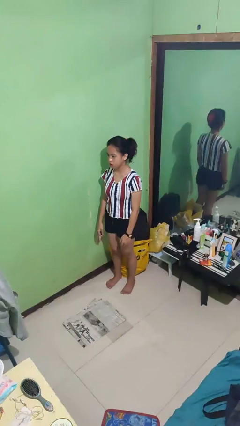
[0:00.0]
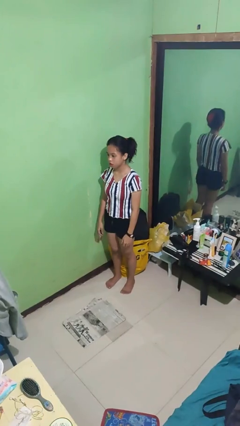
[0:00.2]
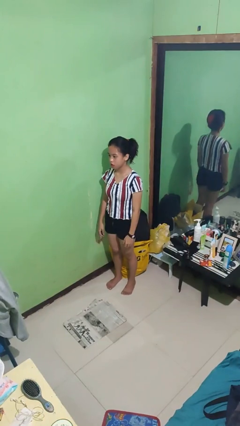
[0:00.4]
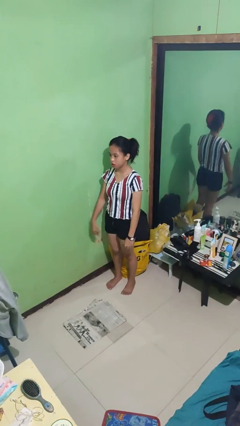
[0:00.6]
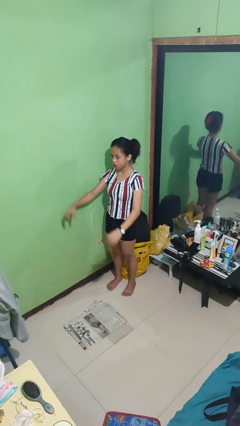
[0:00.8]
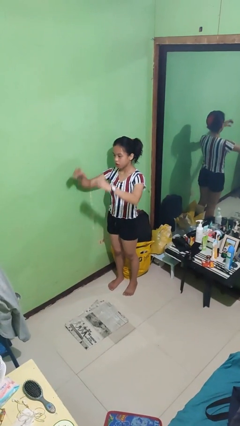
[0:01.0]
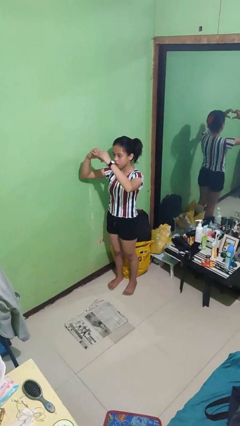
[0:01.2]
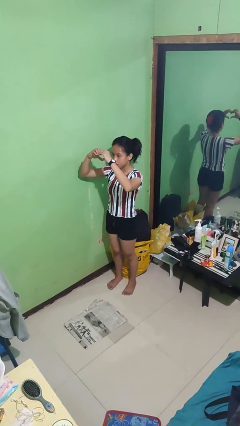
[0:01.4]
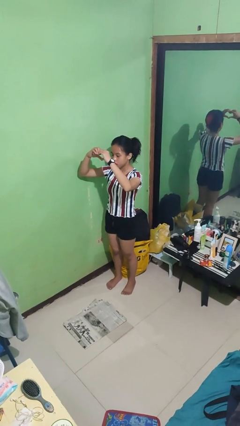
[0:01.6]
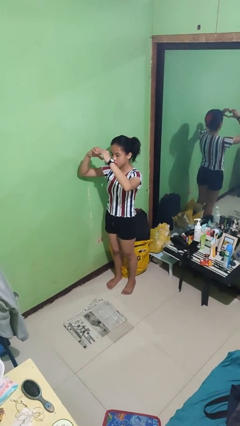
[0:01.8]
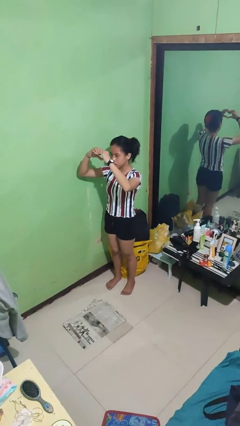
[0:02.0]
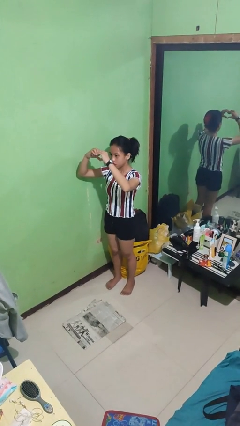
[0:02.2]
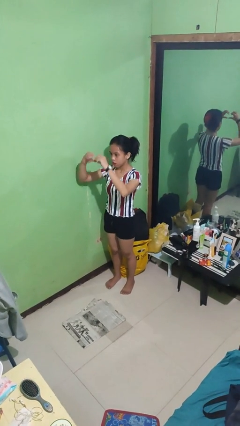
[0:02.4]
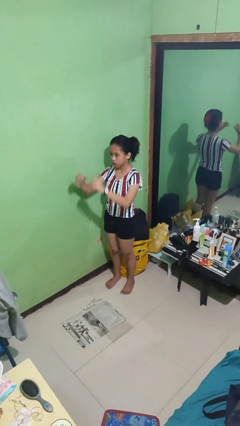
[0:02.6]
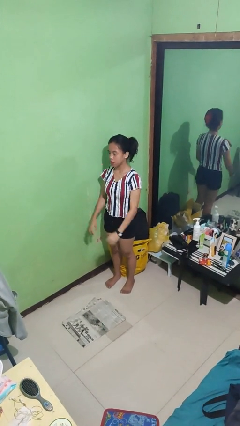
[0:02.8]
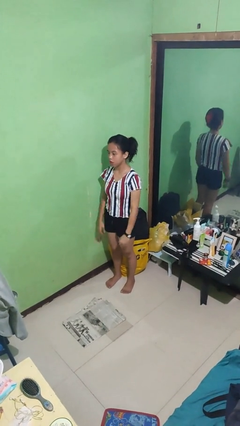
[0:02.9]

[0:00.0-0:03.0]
person gestures heart

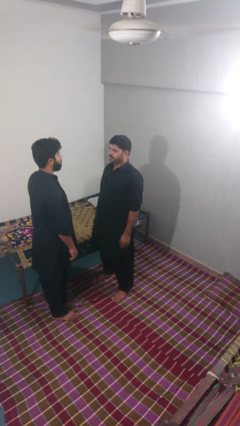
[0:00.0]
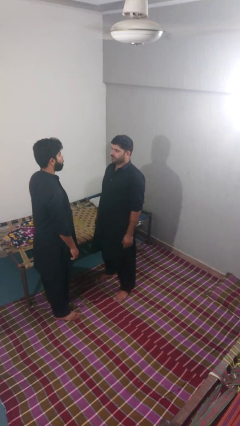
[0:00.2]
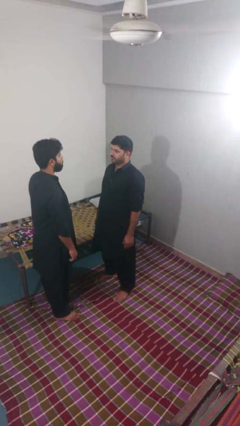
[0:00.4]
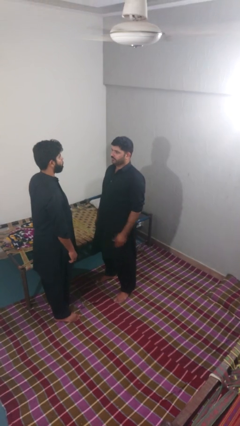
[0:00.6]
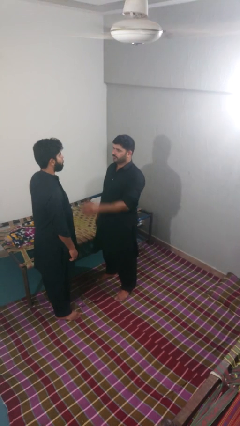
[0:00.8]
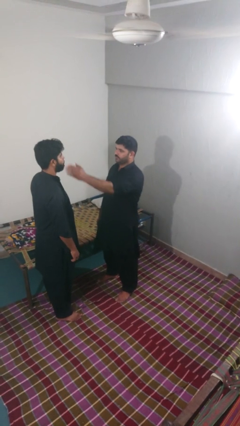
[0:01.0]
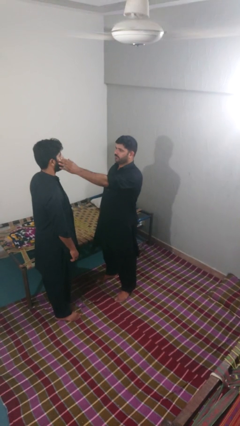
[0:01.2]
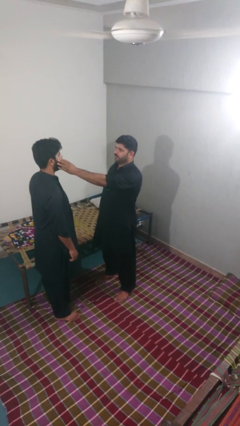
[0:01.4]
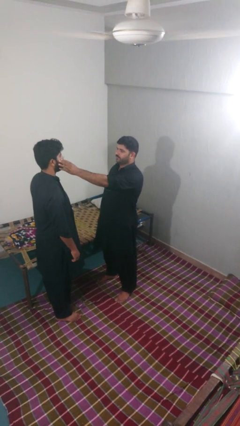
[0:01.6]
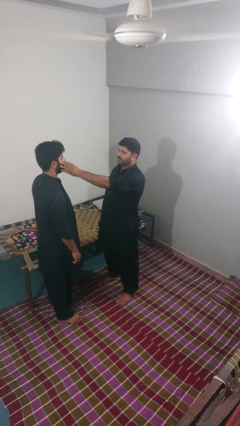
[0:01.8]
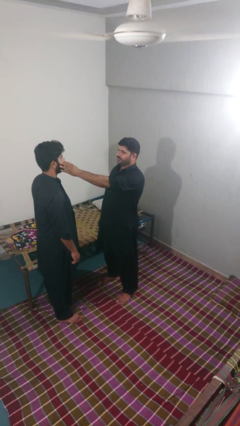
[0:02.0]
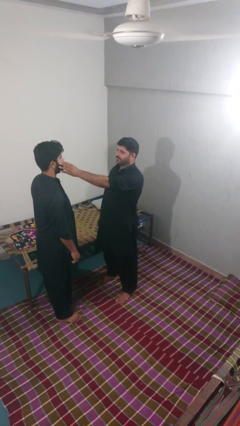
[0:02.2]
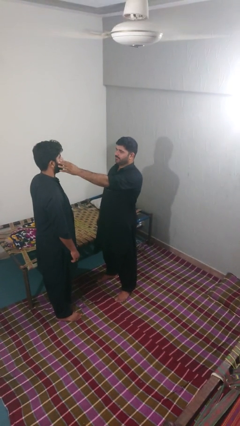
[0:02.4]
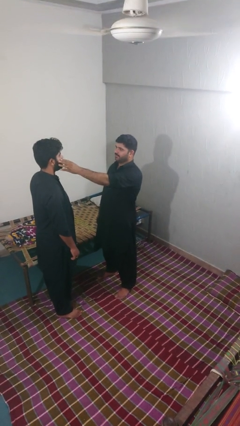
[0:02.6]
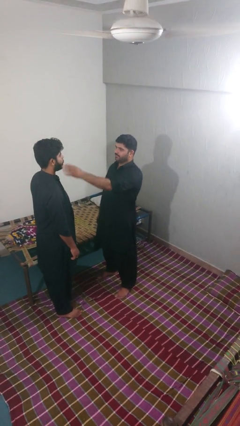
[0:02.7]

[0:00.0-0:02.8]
person touches face of person

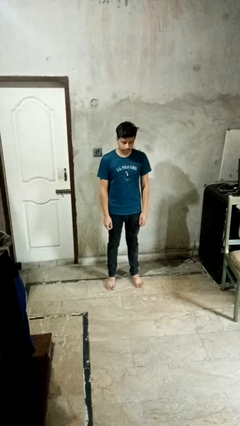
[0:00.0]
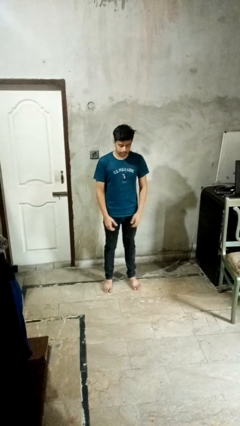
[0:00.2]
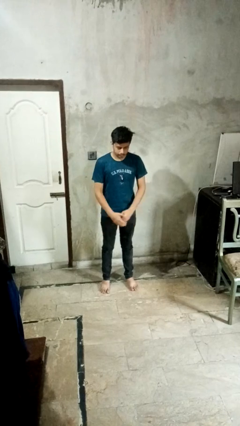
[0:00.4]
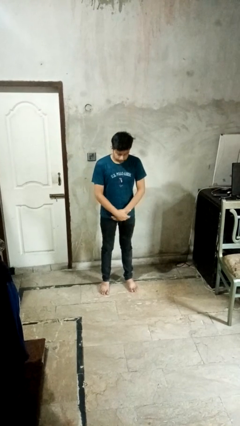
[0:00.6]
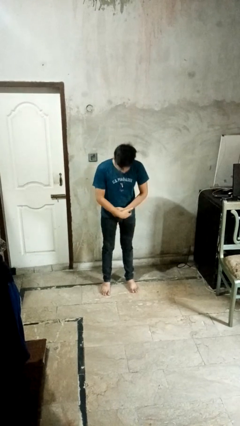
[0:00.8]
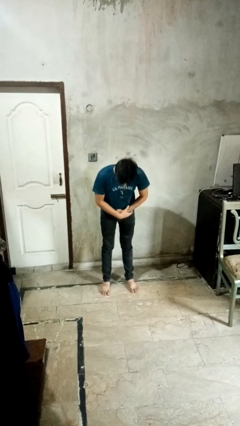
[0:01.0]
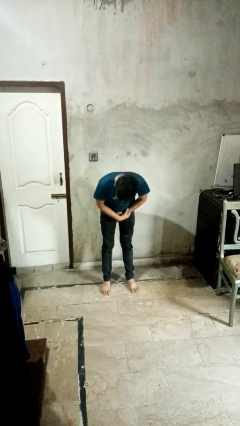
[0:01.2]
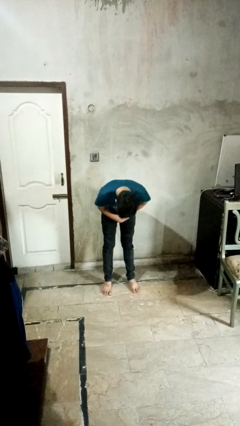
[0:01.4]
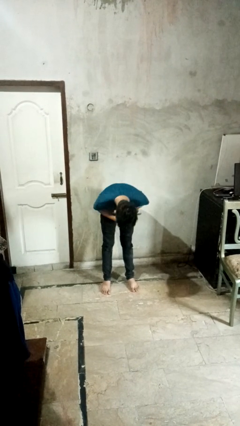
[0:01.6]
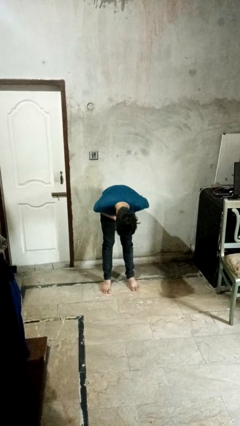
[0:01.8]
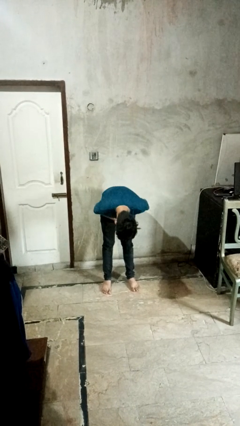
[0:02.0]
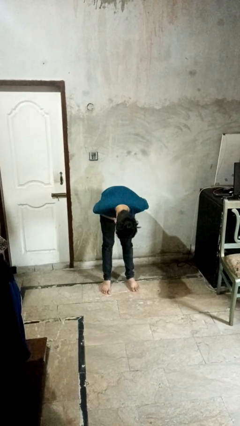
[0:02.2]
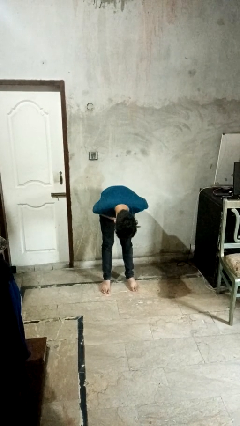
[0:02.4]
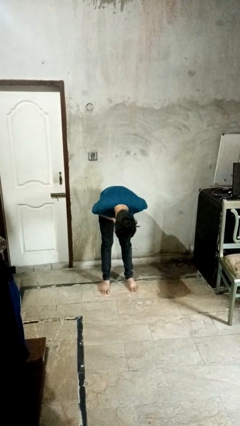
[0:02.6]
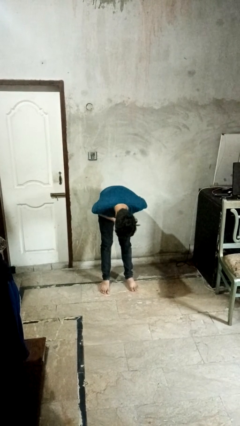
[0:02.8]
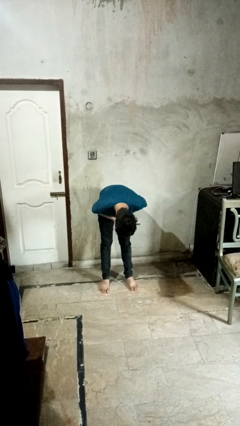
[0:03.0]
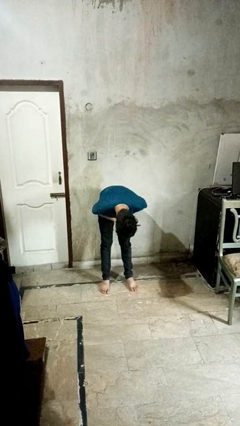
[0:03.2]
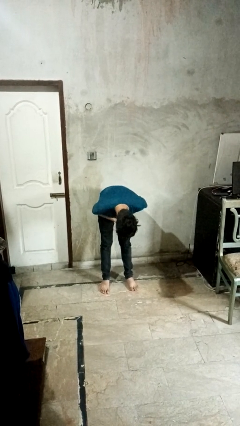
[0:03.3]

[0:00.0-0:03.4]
person bows

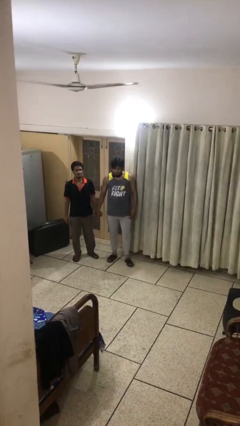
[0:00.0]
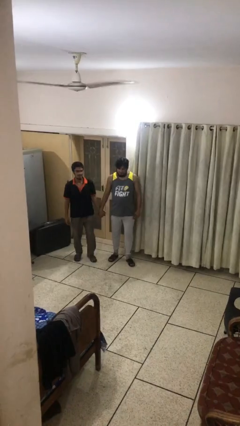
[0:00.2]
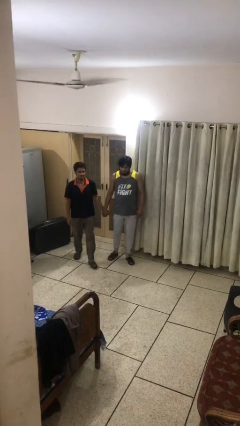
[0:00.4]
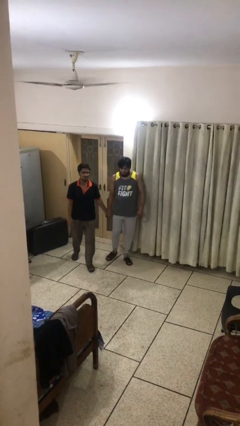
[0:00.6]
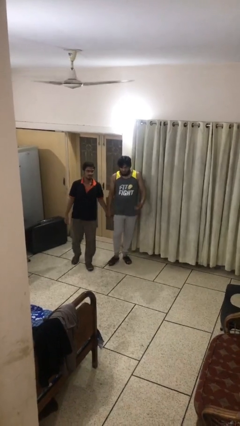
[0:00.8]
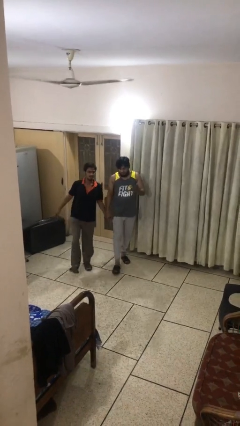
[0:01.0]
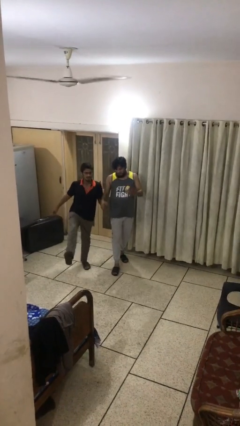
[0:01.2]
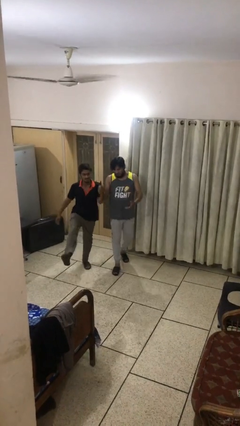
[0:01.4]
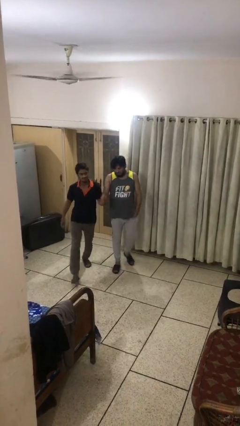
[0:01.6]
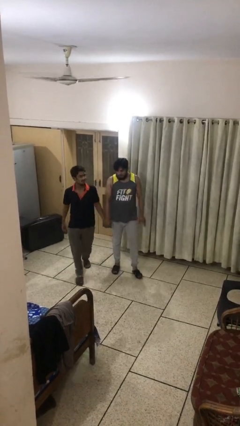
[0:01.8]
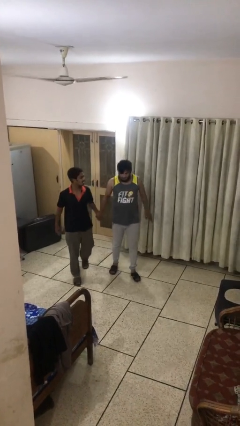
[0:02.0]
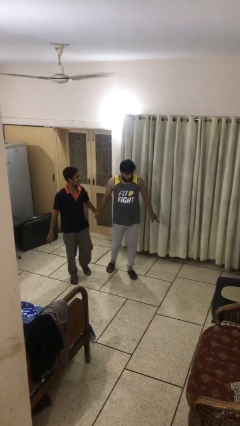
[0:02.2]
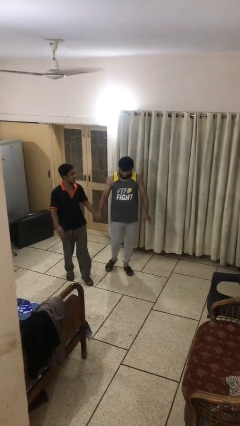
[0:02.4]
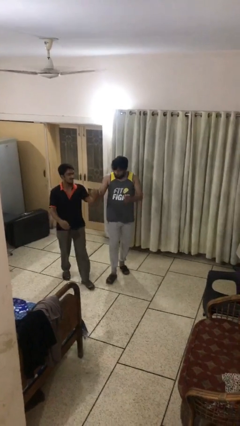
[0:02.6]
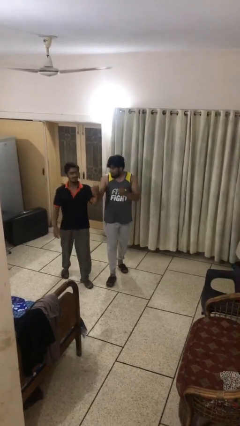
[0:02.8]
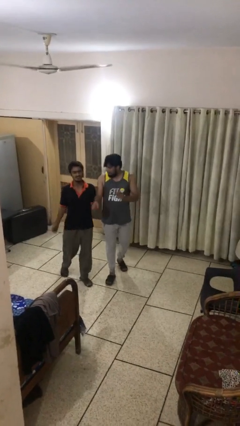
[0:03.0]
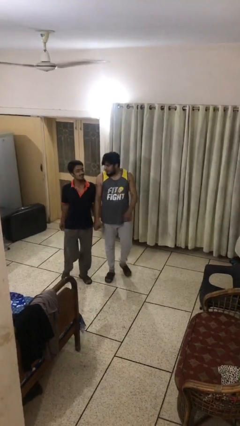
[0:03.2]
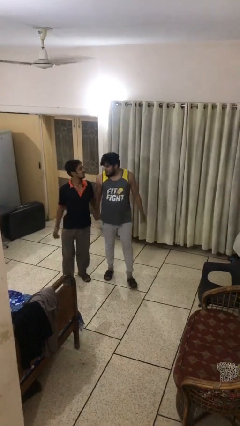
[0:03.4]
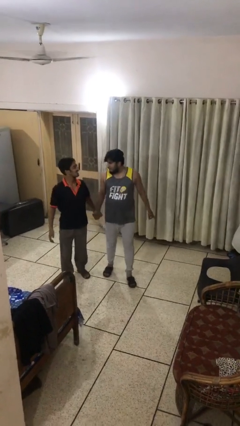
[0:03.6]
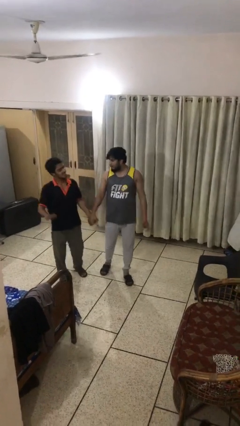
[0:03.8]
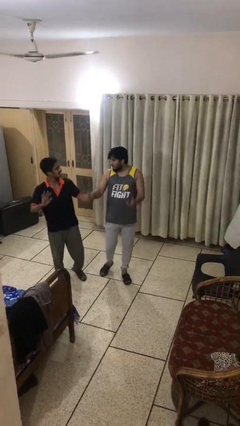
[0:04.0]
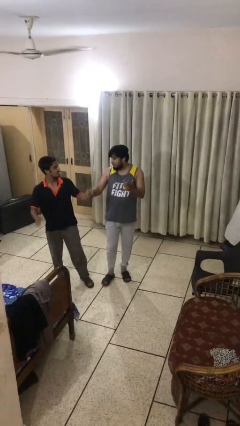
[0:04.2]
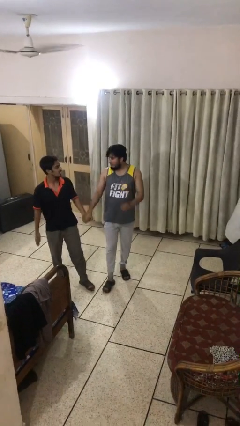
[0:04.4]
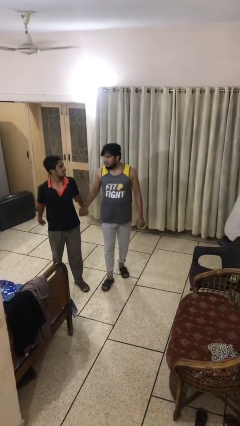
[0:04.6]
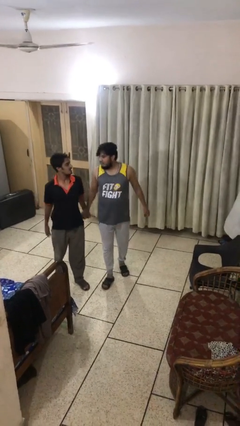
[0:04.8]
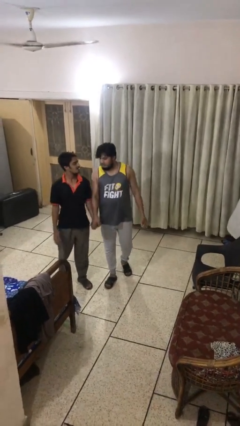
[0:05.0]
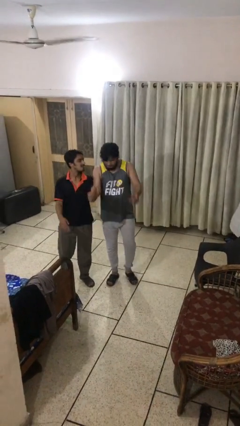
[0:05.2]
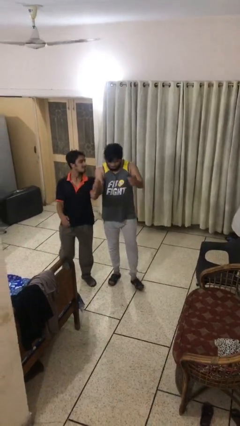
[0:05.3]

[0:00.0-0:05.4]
person holds hand

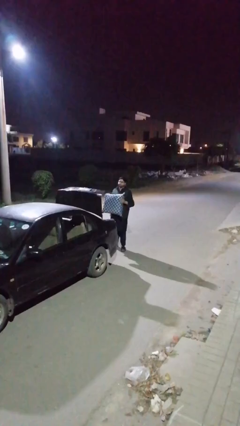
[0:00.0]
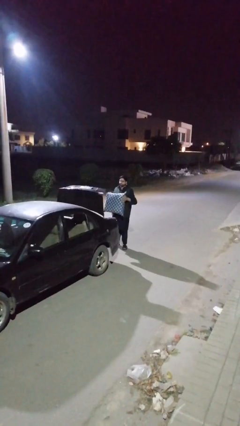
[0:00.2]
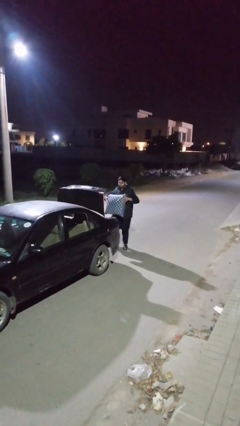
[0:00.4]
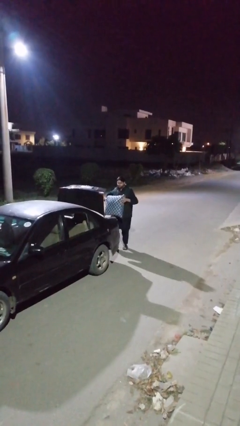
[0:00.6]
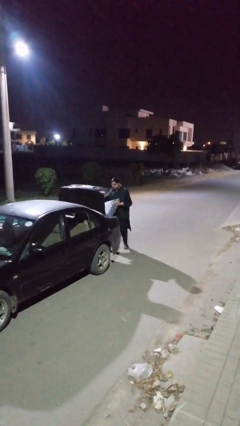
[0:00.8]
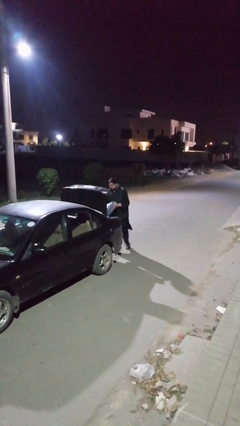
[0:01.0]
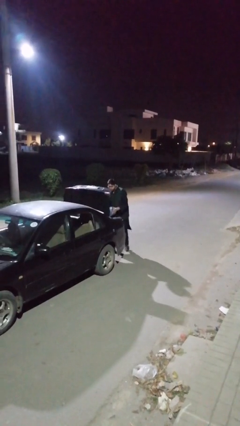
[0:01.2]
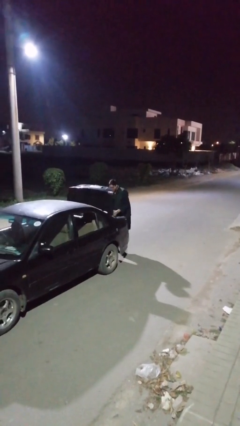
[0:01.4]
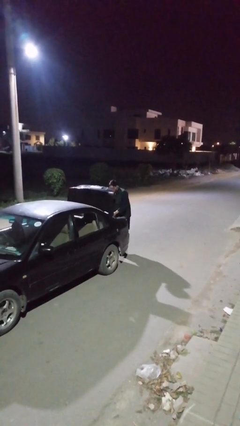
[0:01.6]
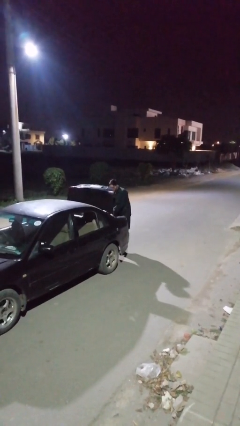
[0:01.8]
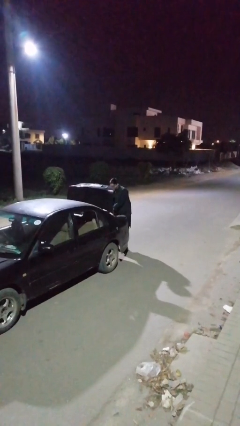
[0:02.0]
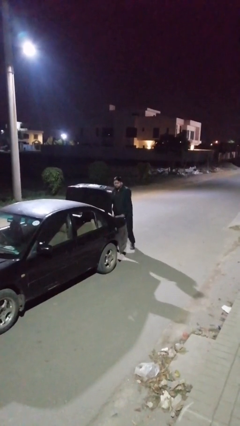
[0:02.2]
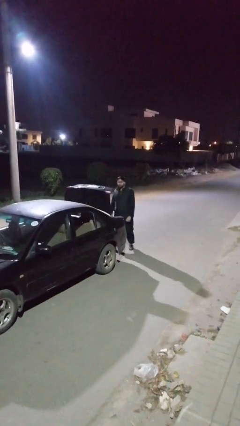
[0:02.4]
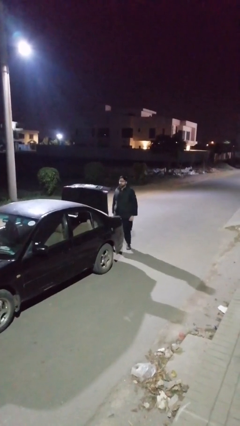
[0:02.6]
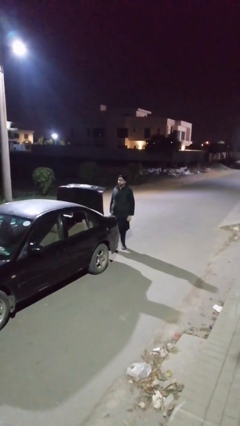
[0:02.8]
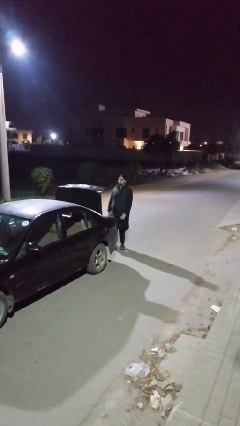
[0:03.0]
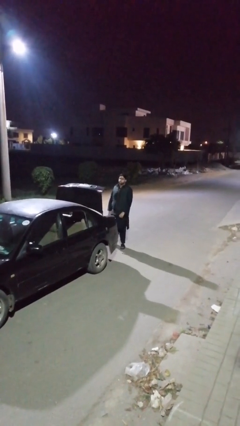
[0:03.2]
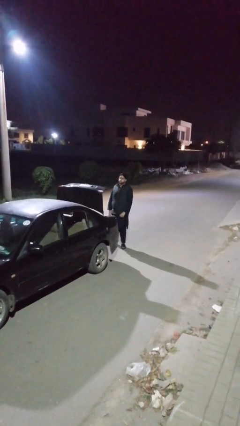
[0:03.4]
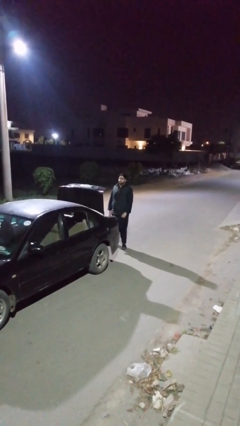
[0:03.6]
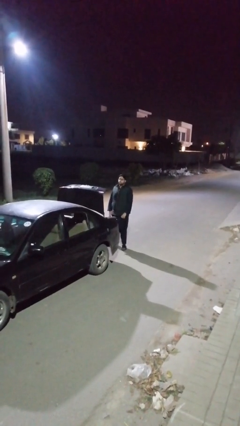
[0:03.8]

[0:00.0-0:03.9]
person loads car
